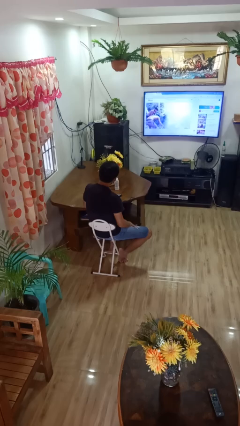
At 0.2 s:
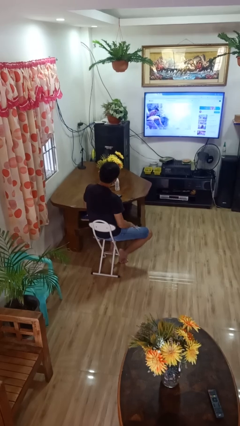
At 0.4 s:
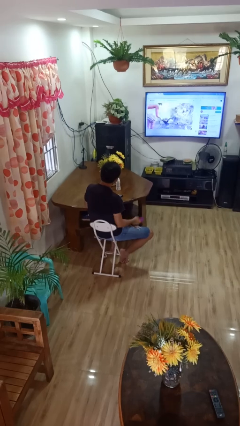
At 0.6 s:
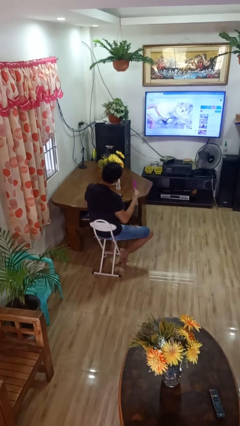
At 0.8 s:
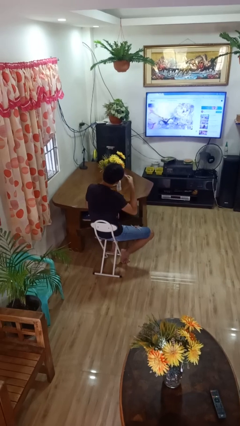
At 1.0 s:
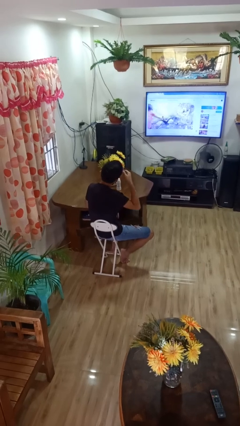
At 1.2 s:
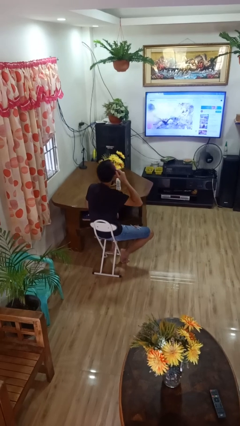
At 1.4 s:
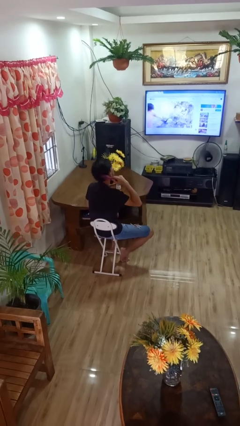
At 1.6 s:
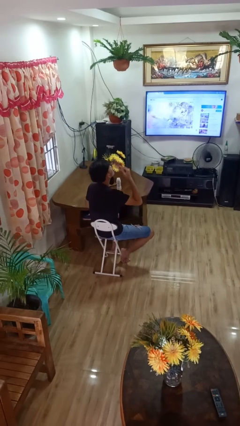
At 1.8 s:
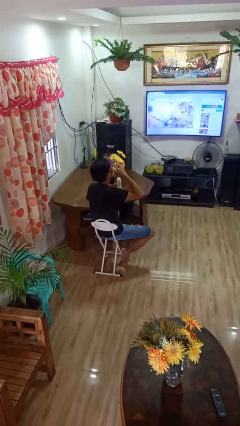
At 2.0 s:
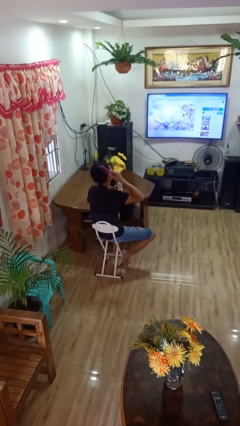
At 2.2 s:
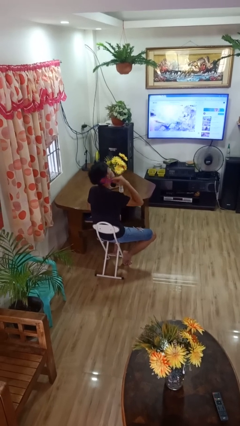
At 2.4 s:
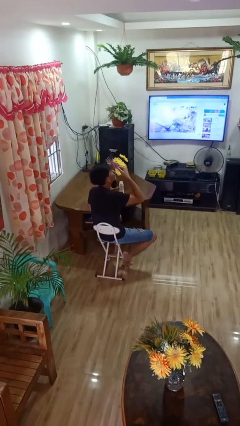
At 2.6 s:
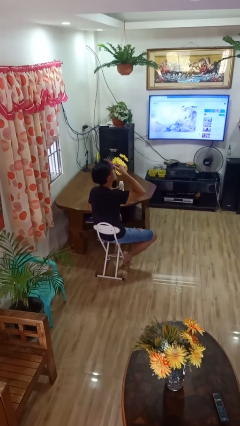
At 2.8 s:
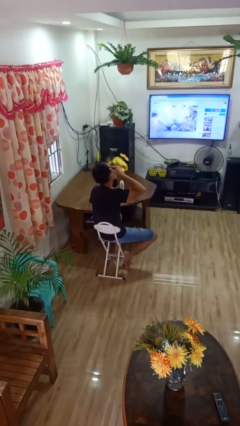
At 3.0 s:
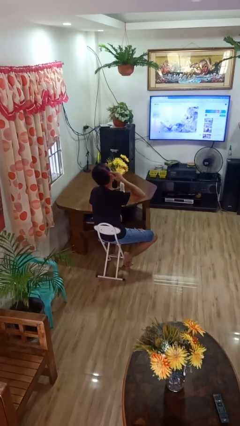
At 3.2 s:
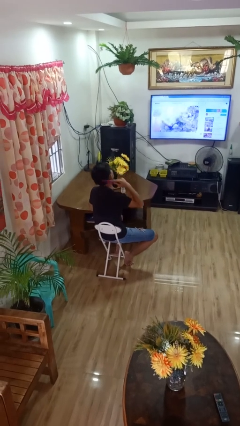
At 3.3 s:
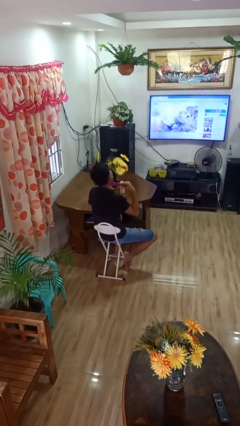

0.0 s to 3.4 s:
person brushes hair

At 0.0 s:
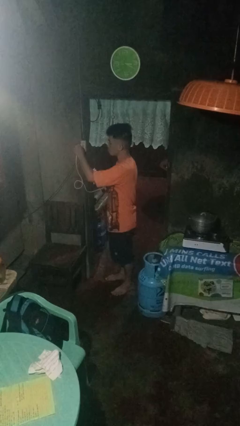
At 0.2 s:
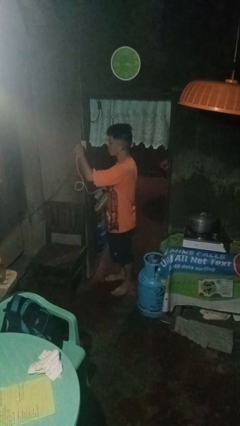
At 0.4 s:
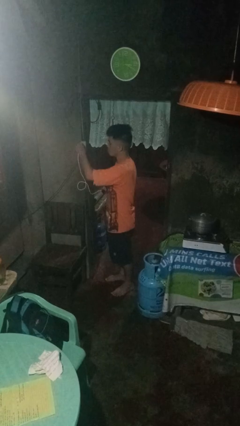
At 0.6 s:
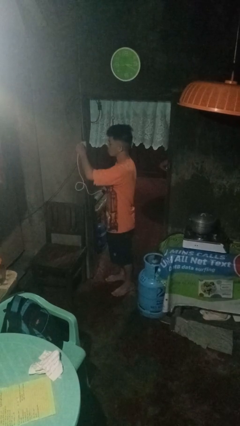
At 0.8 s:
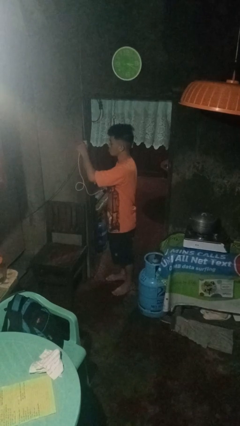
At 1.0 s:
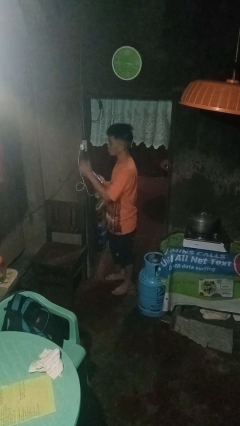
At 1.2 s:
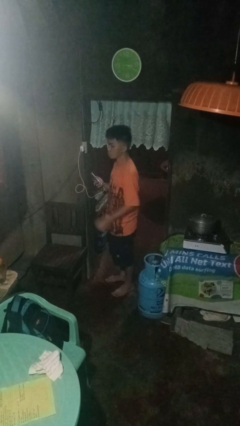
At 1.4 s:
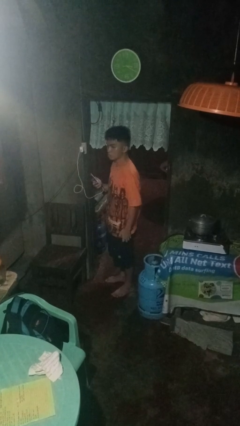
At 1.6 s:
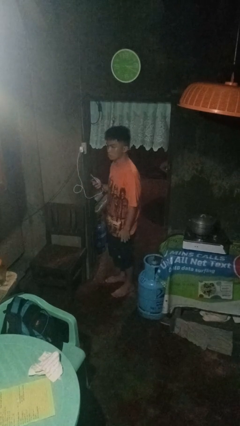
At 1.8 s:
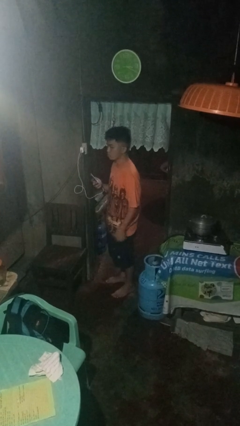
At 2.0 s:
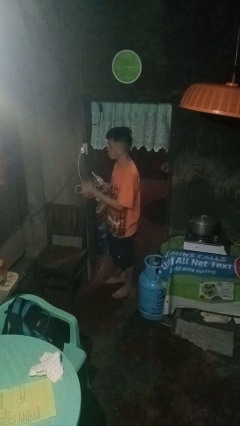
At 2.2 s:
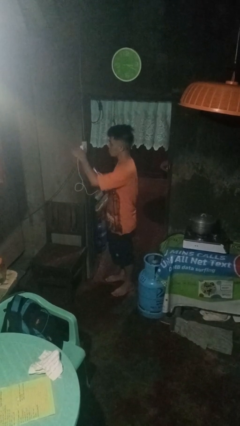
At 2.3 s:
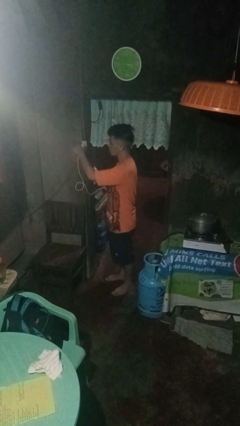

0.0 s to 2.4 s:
person plugs into electrical socket

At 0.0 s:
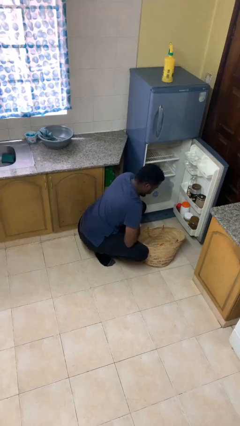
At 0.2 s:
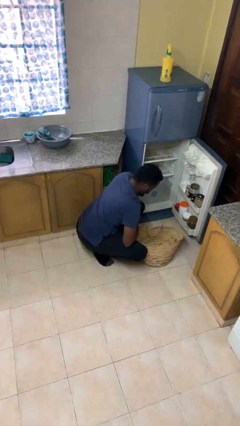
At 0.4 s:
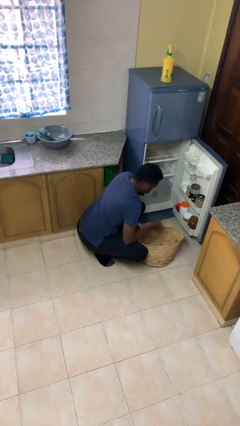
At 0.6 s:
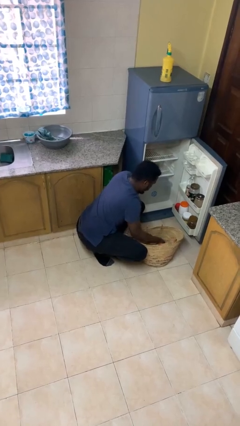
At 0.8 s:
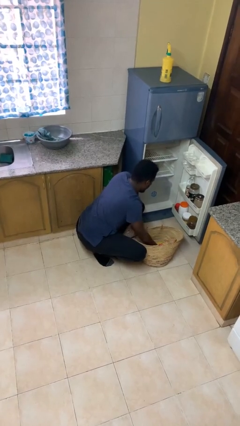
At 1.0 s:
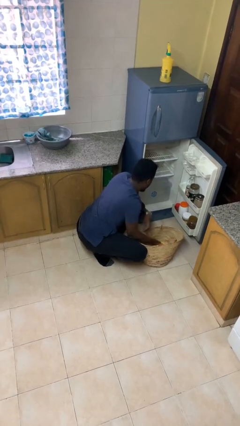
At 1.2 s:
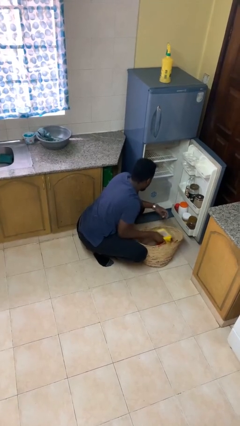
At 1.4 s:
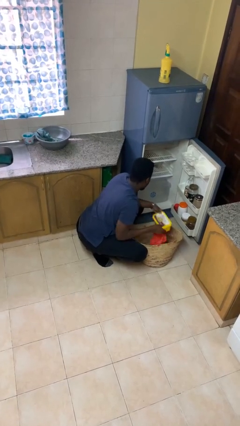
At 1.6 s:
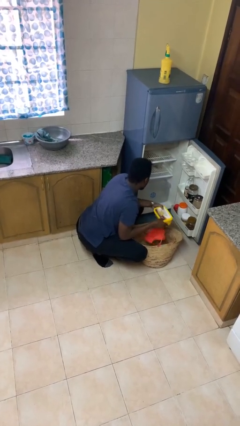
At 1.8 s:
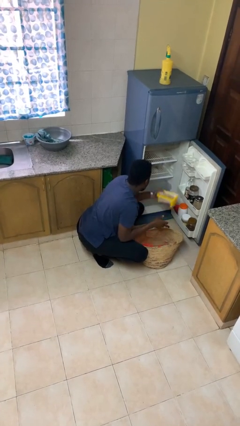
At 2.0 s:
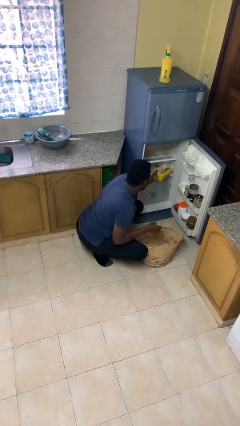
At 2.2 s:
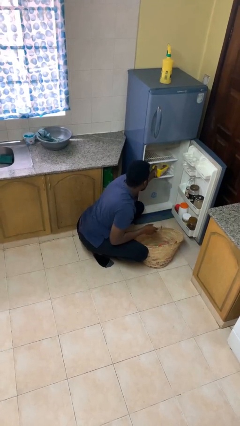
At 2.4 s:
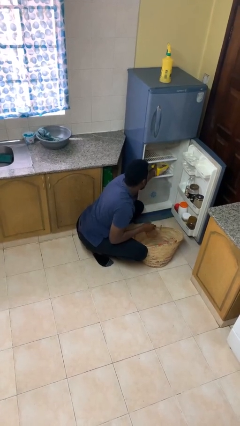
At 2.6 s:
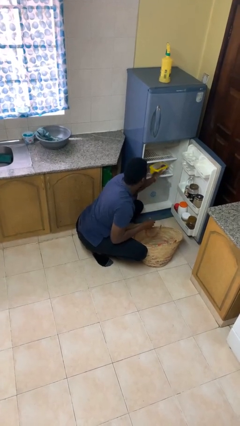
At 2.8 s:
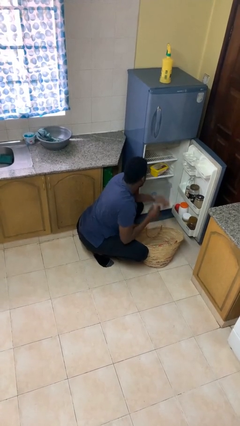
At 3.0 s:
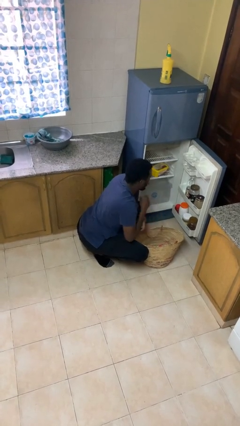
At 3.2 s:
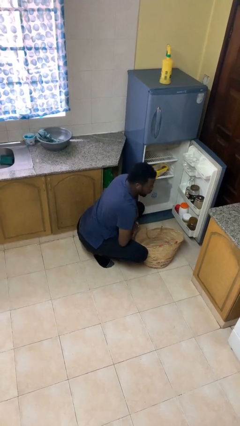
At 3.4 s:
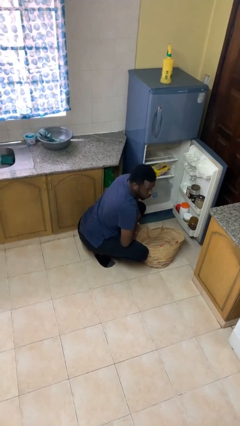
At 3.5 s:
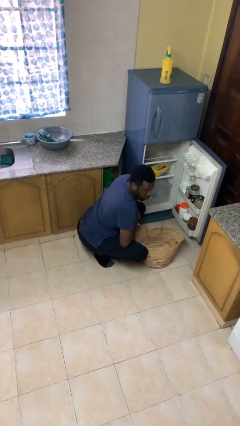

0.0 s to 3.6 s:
person loads groceries into refrigerator

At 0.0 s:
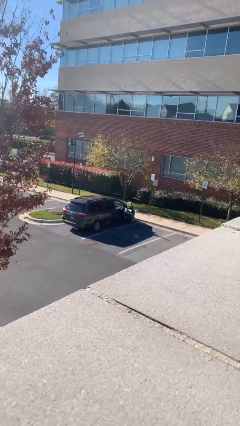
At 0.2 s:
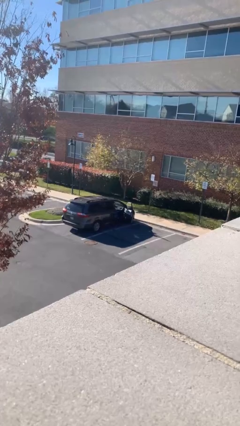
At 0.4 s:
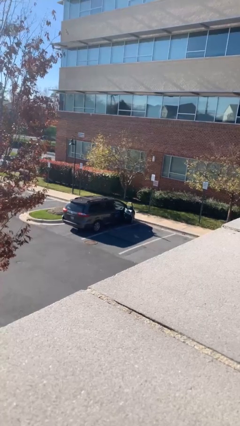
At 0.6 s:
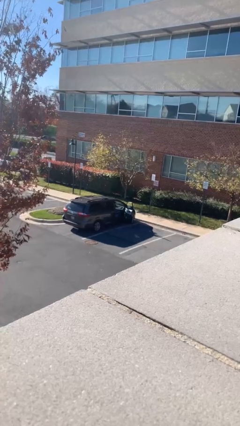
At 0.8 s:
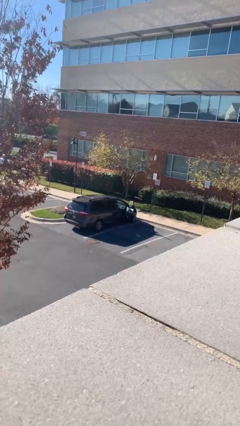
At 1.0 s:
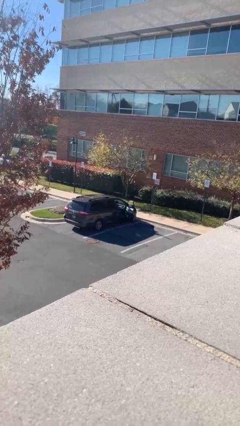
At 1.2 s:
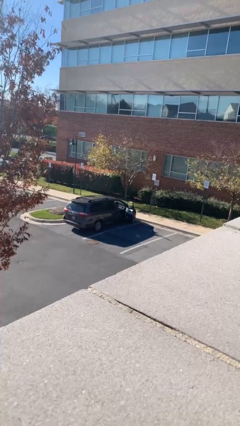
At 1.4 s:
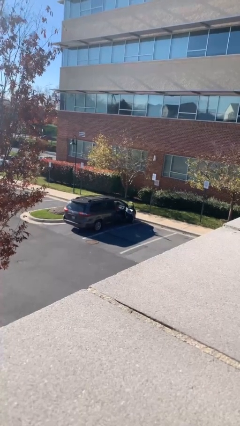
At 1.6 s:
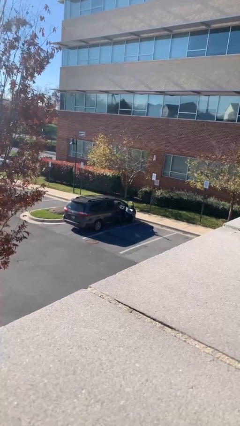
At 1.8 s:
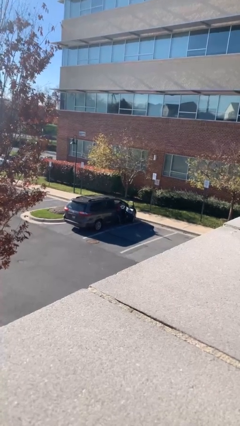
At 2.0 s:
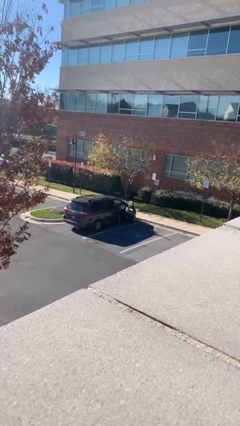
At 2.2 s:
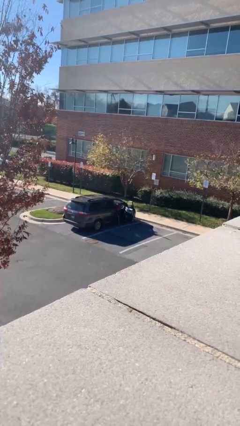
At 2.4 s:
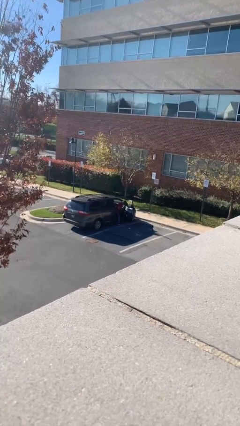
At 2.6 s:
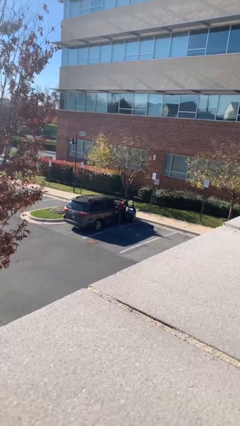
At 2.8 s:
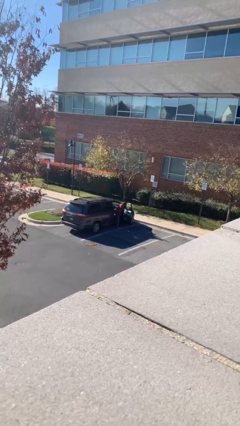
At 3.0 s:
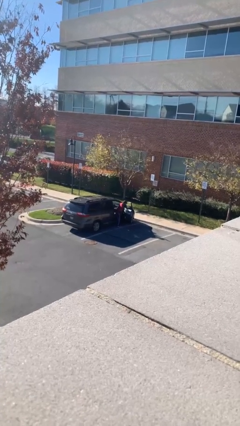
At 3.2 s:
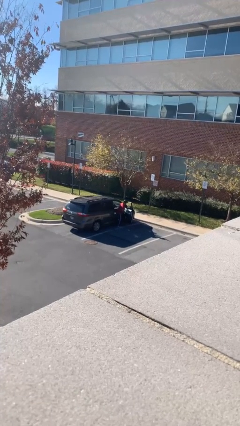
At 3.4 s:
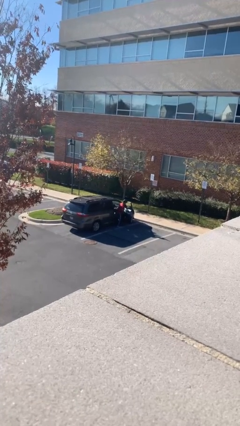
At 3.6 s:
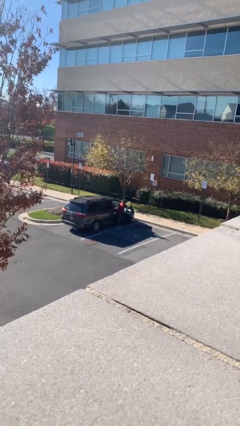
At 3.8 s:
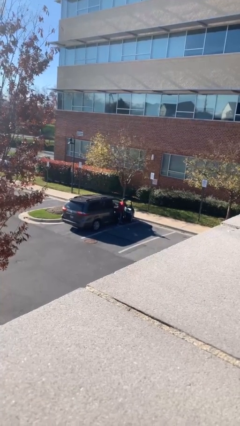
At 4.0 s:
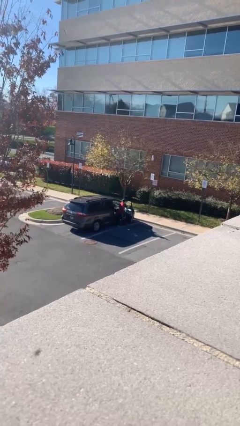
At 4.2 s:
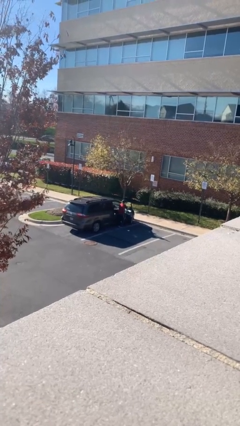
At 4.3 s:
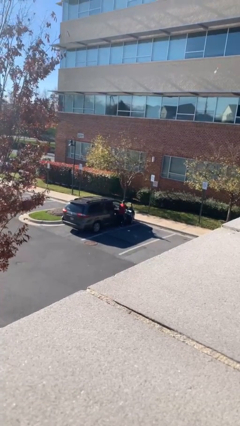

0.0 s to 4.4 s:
person exits car

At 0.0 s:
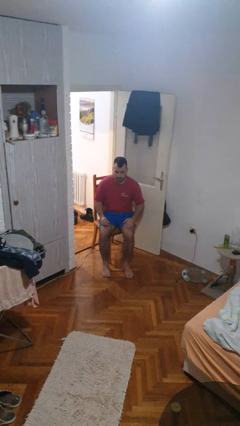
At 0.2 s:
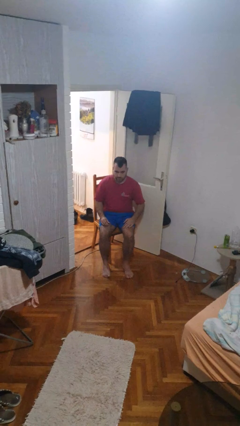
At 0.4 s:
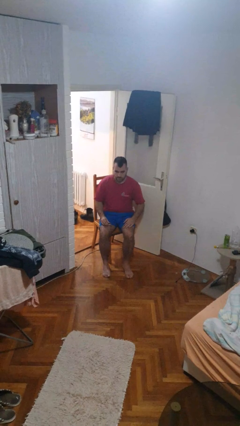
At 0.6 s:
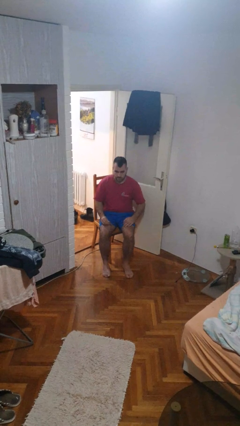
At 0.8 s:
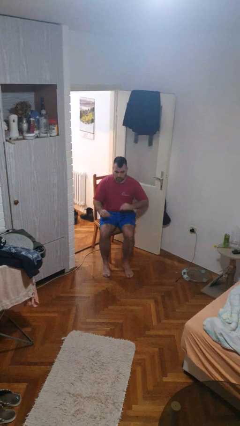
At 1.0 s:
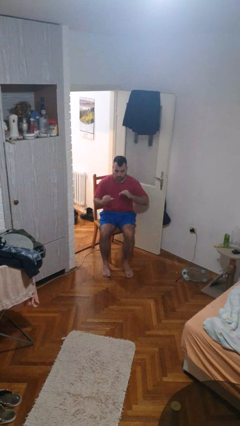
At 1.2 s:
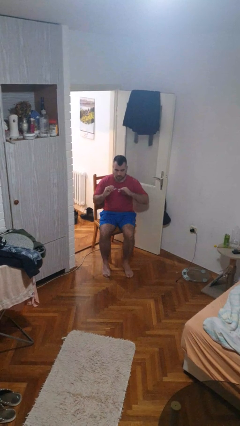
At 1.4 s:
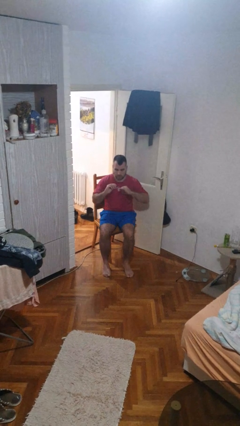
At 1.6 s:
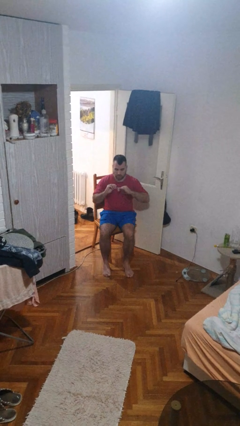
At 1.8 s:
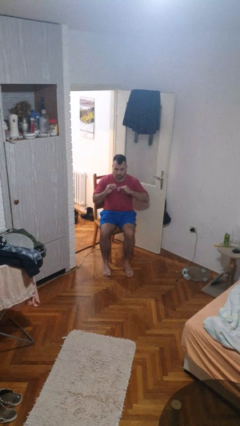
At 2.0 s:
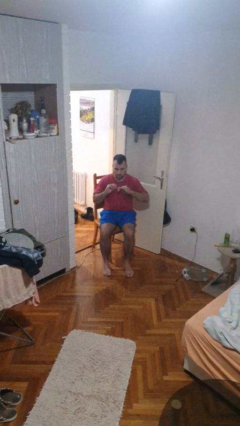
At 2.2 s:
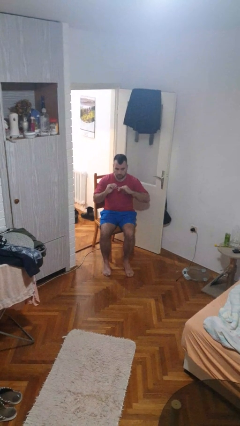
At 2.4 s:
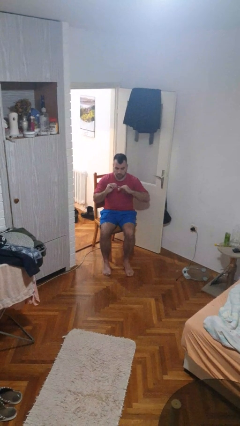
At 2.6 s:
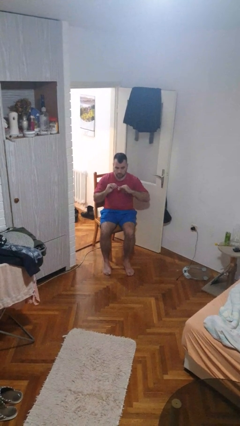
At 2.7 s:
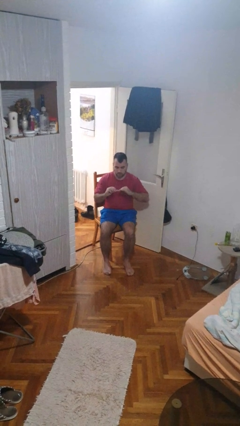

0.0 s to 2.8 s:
person clips fingernails

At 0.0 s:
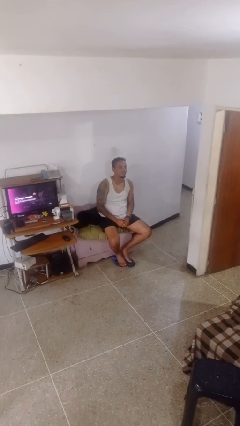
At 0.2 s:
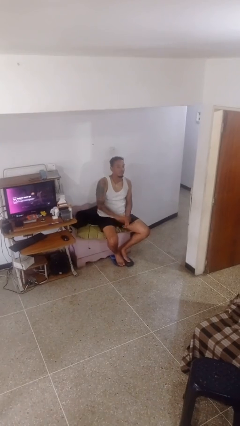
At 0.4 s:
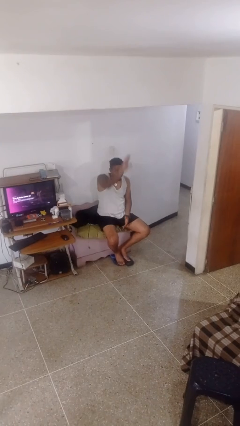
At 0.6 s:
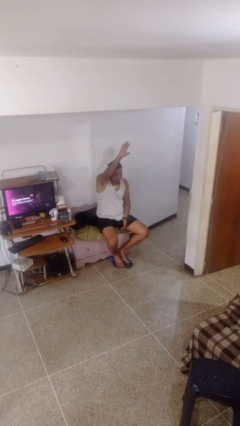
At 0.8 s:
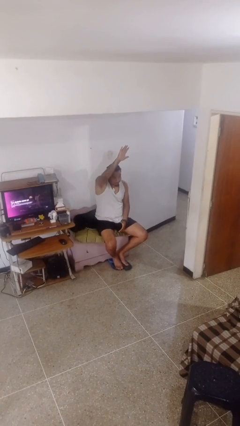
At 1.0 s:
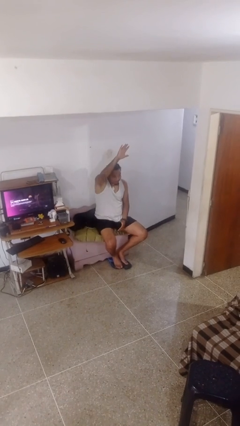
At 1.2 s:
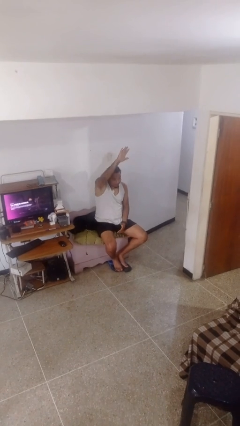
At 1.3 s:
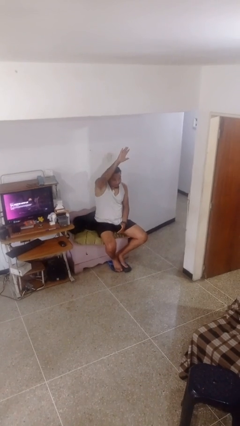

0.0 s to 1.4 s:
person gestures raise hand
